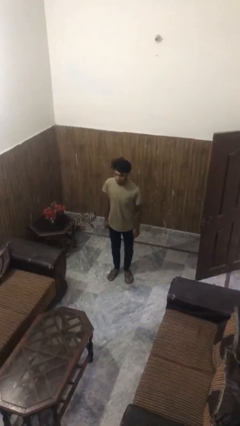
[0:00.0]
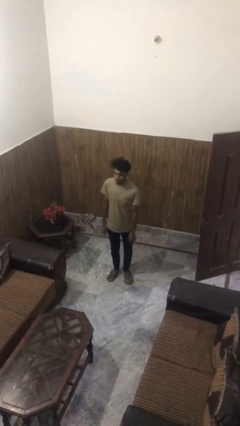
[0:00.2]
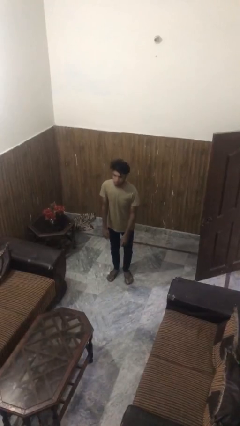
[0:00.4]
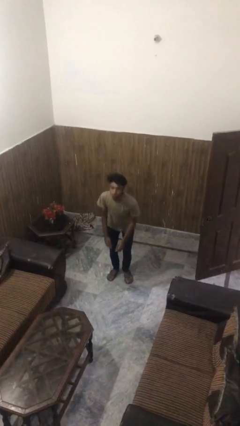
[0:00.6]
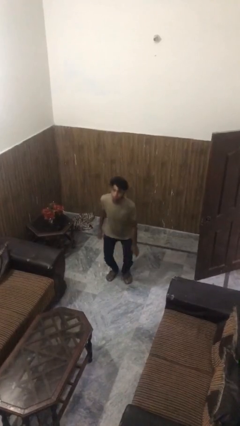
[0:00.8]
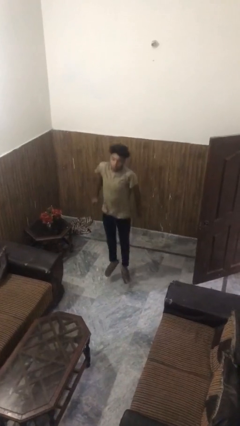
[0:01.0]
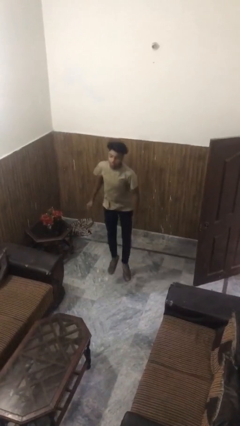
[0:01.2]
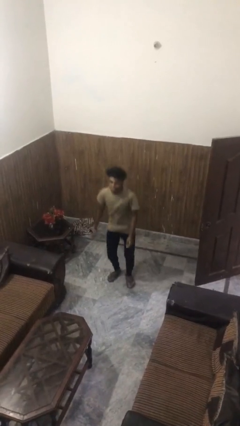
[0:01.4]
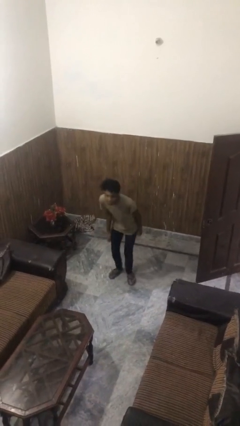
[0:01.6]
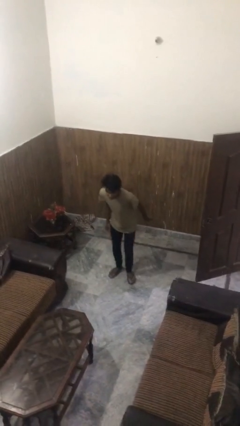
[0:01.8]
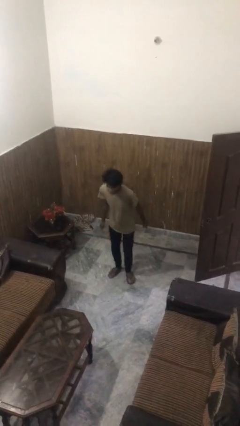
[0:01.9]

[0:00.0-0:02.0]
person jumps

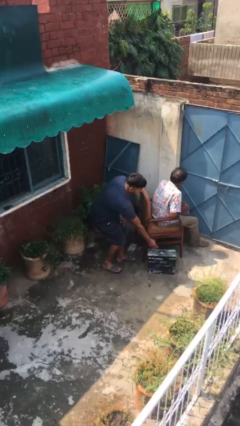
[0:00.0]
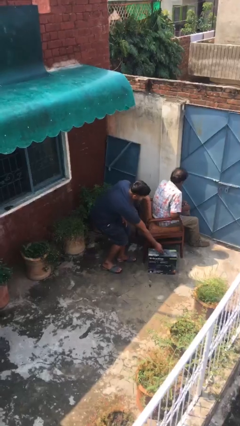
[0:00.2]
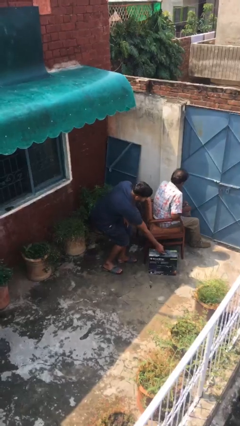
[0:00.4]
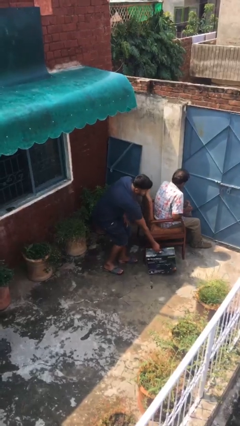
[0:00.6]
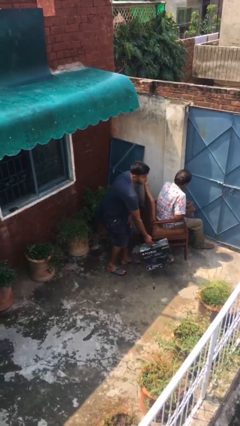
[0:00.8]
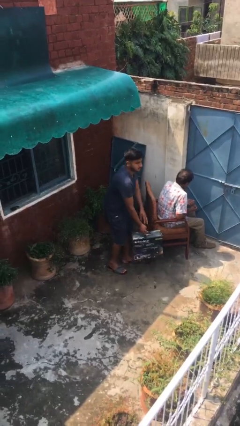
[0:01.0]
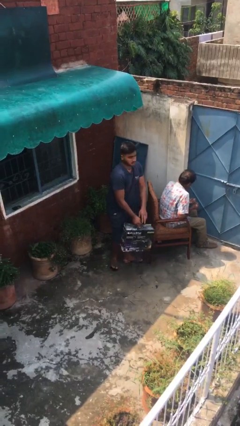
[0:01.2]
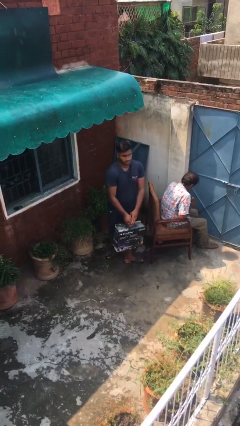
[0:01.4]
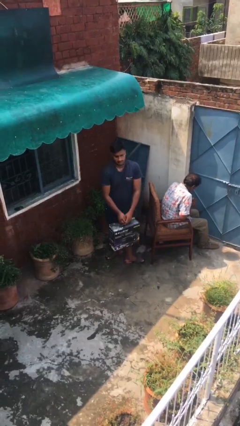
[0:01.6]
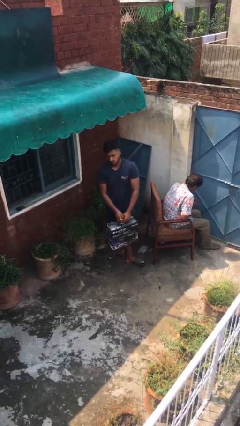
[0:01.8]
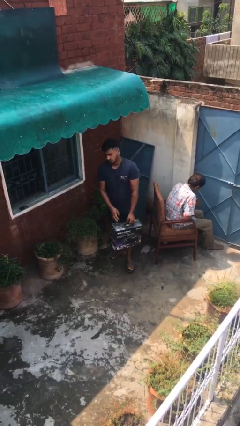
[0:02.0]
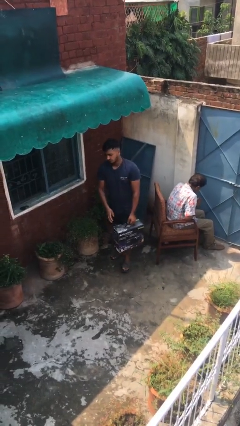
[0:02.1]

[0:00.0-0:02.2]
person steals object from person

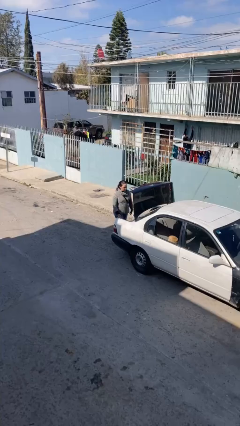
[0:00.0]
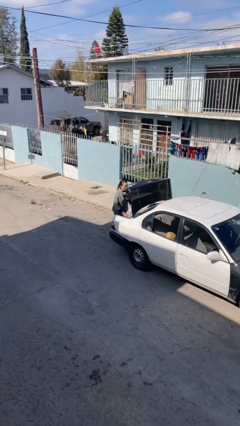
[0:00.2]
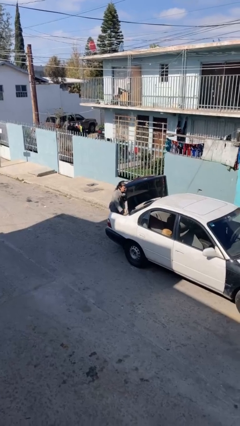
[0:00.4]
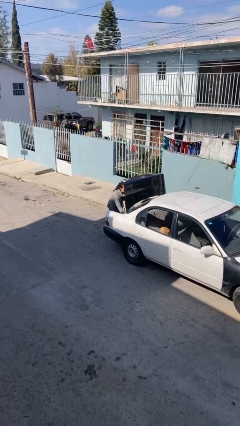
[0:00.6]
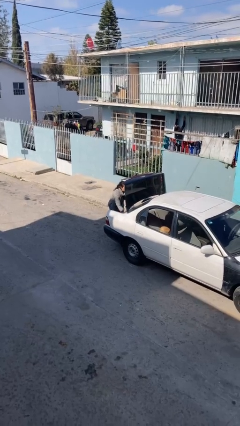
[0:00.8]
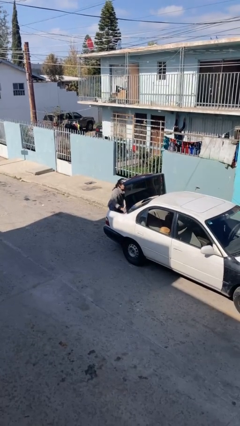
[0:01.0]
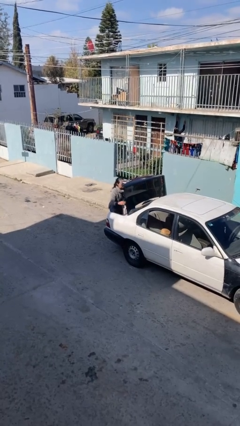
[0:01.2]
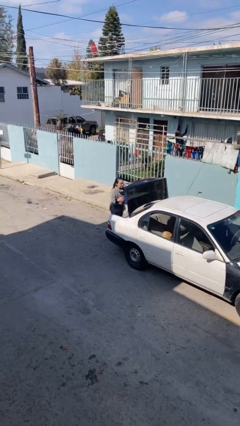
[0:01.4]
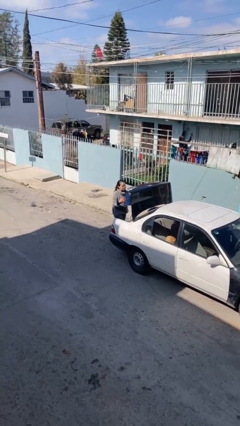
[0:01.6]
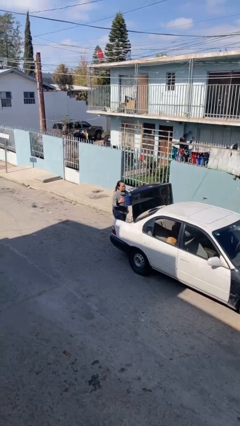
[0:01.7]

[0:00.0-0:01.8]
person unloads car

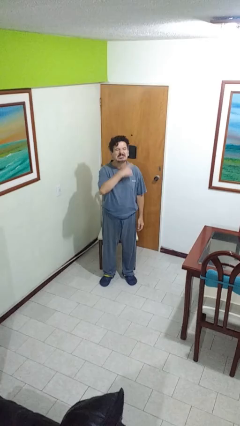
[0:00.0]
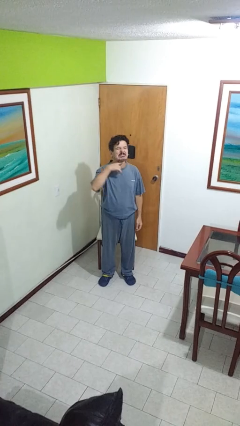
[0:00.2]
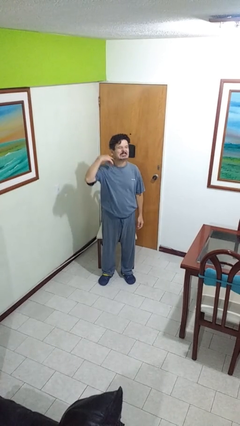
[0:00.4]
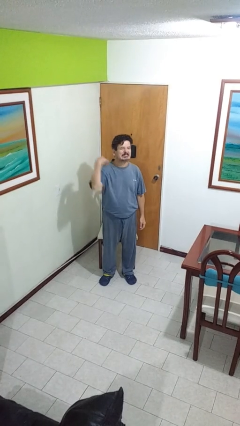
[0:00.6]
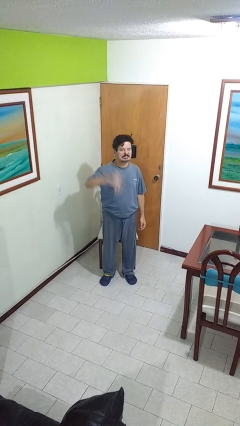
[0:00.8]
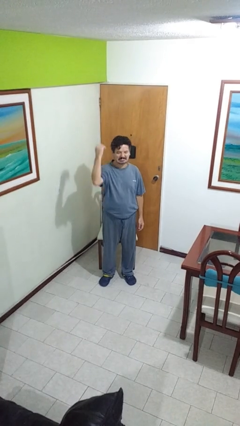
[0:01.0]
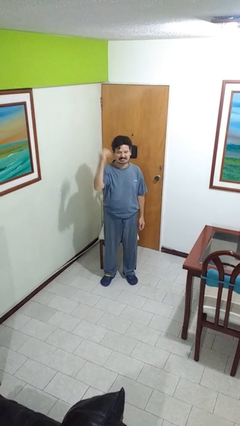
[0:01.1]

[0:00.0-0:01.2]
person gestures cut

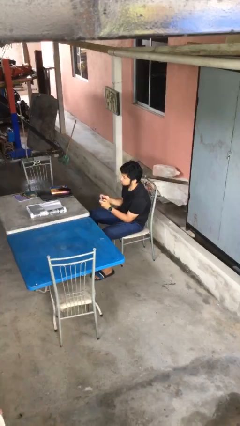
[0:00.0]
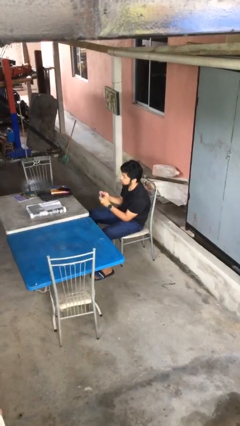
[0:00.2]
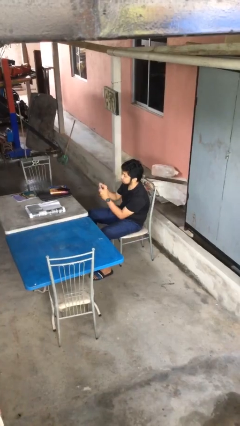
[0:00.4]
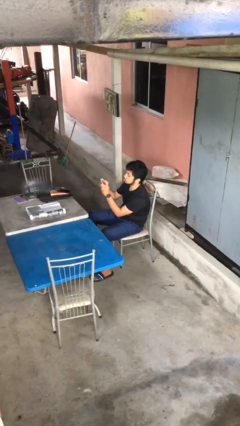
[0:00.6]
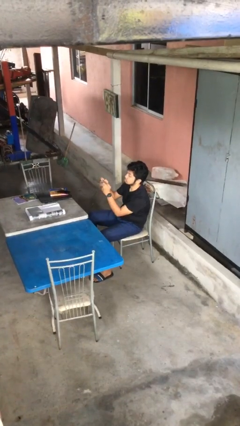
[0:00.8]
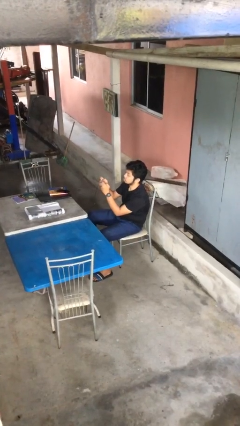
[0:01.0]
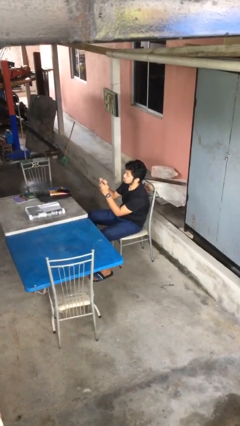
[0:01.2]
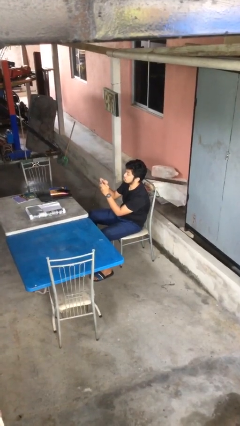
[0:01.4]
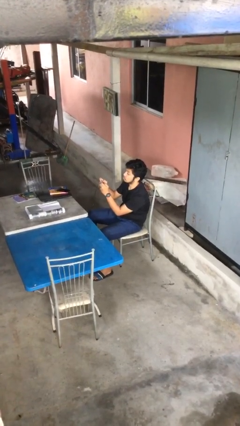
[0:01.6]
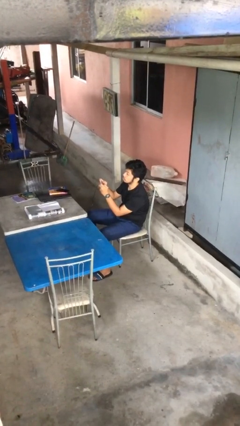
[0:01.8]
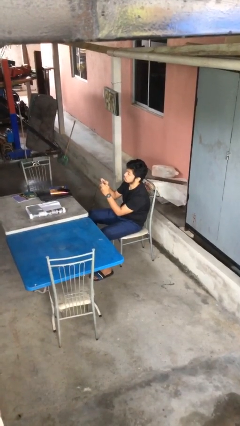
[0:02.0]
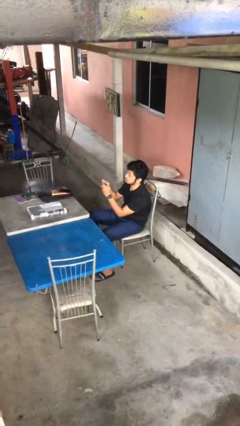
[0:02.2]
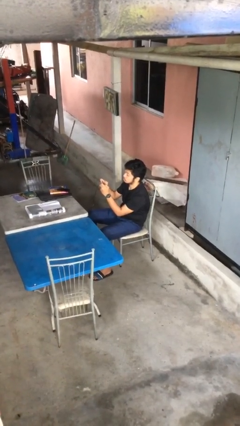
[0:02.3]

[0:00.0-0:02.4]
person interacts with handheld game

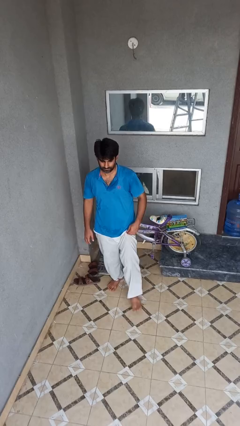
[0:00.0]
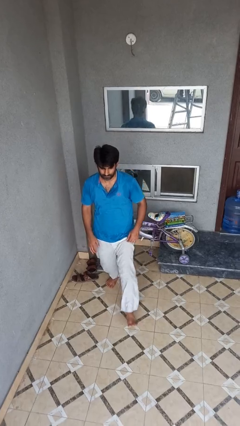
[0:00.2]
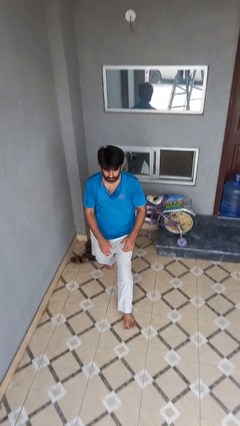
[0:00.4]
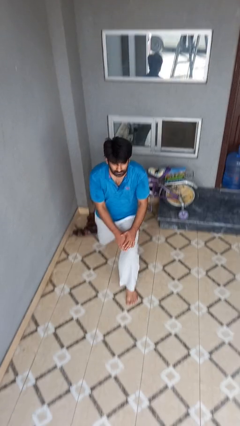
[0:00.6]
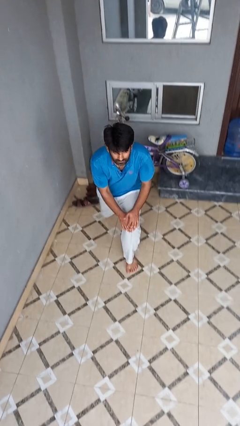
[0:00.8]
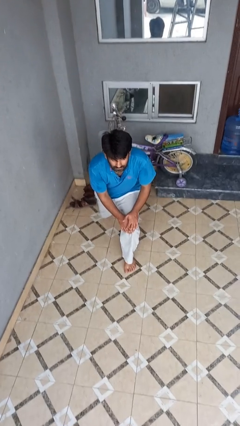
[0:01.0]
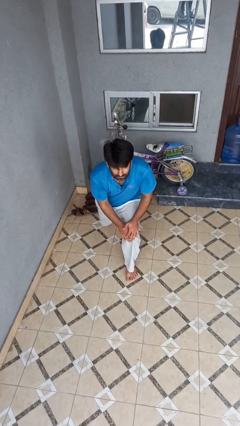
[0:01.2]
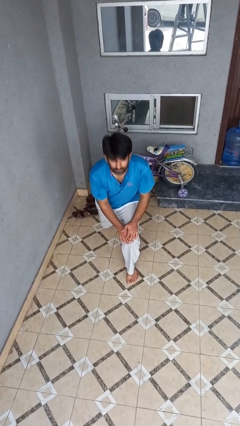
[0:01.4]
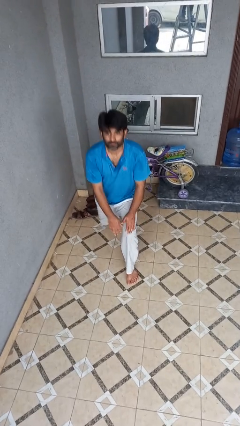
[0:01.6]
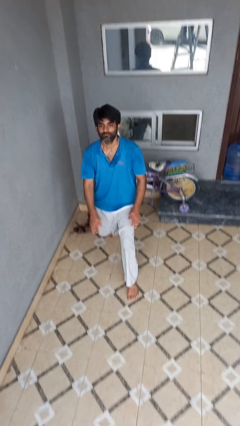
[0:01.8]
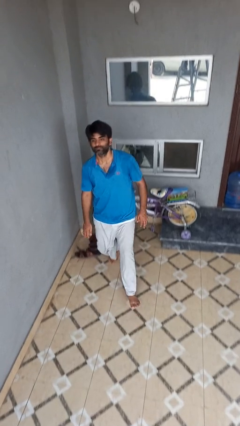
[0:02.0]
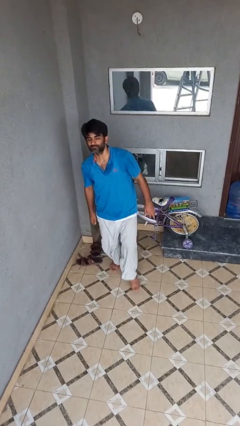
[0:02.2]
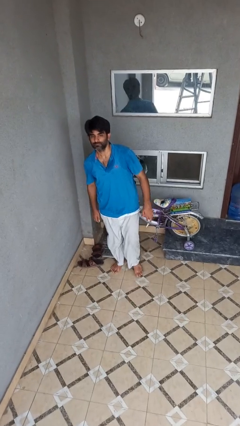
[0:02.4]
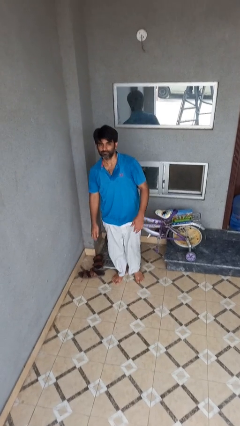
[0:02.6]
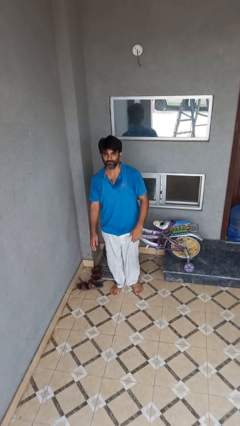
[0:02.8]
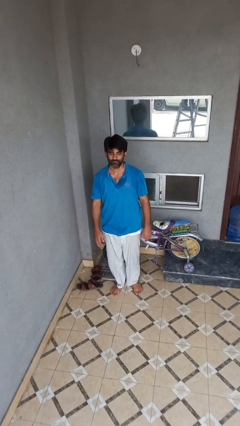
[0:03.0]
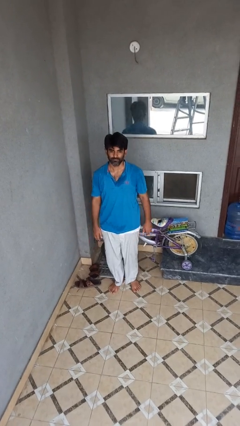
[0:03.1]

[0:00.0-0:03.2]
person exercises with lunges

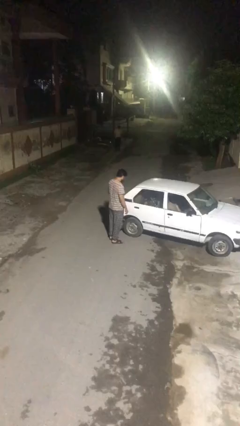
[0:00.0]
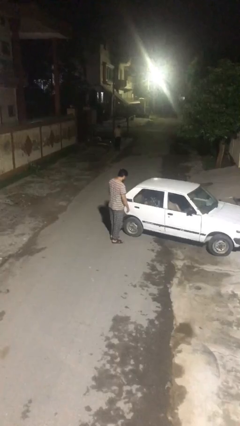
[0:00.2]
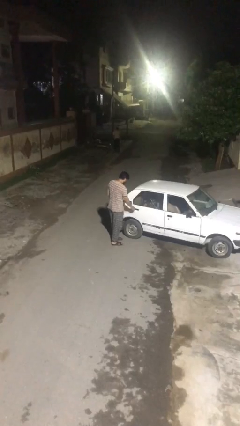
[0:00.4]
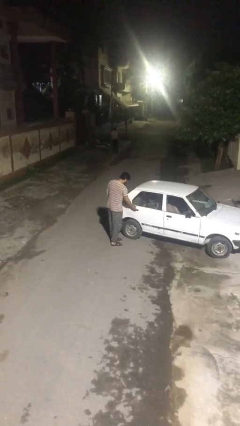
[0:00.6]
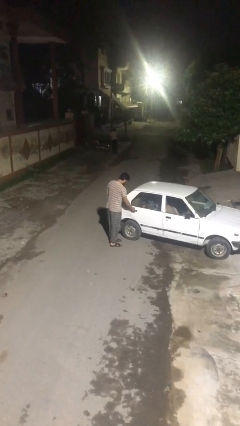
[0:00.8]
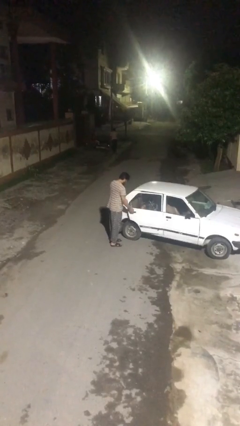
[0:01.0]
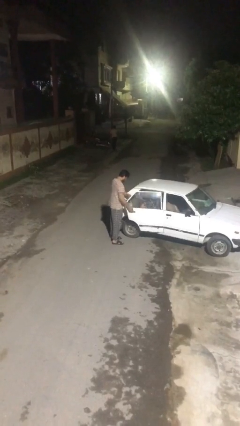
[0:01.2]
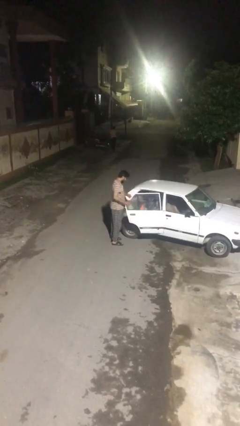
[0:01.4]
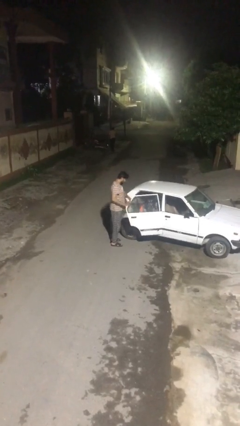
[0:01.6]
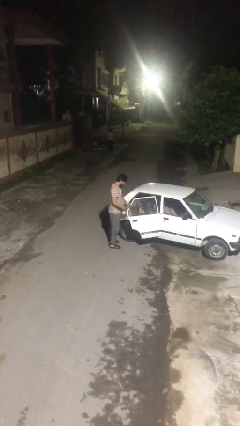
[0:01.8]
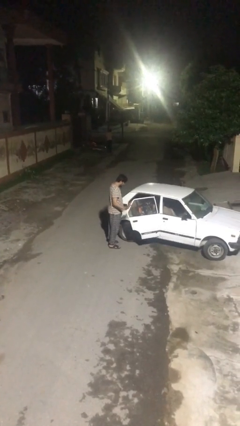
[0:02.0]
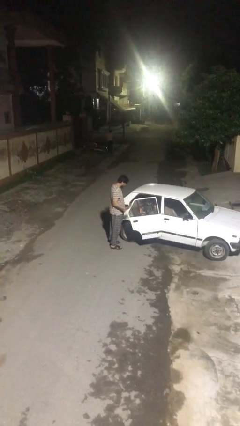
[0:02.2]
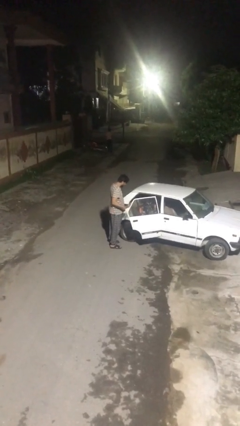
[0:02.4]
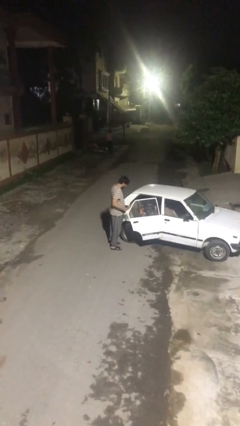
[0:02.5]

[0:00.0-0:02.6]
person opens car door

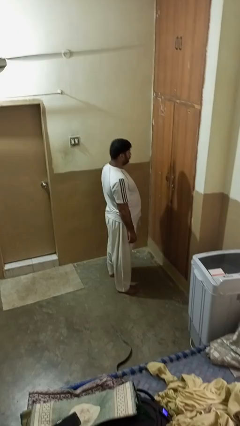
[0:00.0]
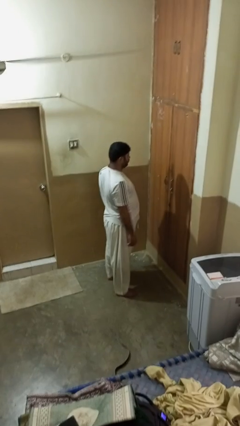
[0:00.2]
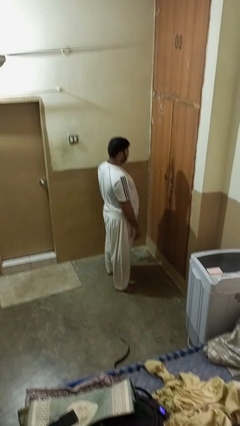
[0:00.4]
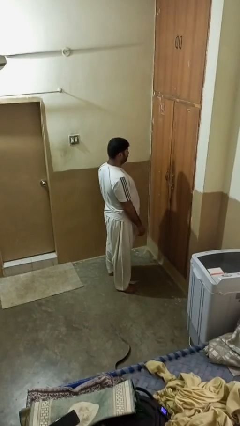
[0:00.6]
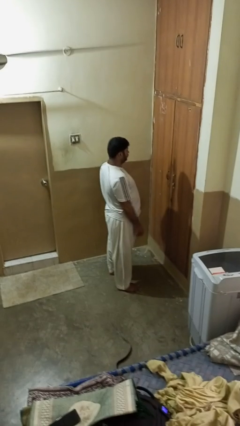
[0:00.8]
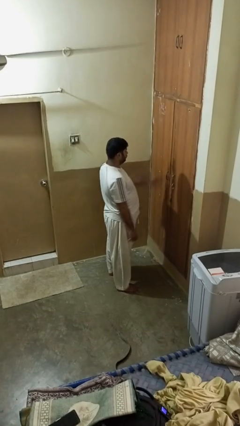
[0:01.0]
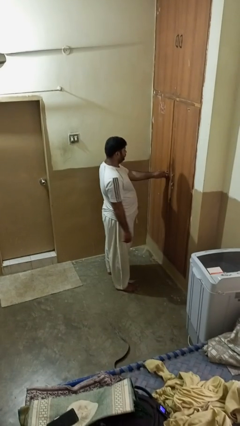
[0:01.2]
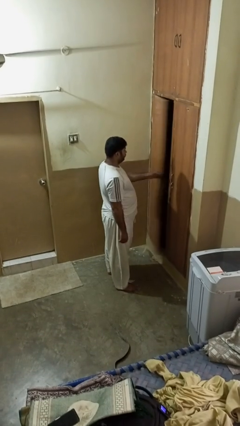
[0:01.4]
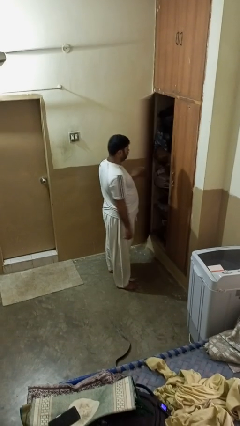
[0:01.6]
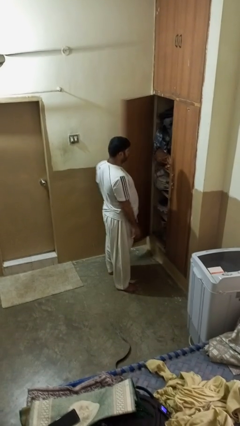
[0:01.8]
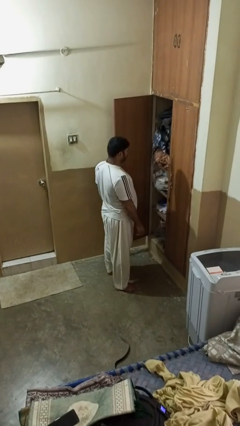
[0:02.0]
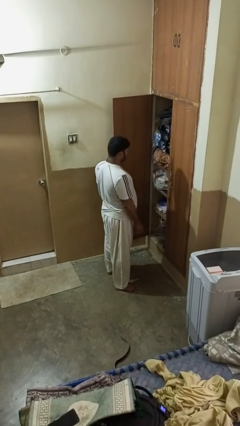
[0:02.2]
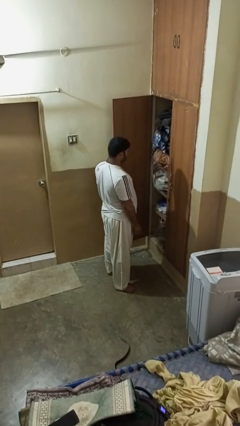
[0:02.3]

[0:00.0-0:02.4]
person opens closet door
